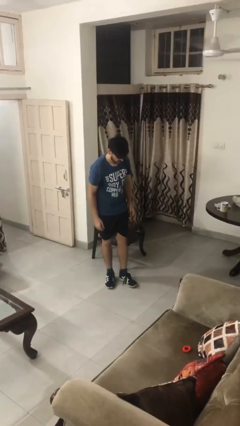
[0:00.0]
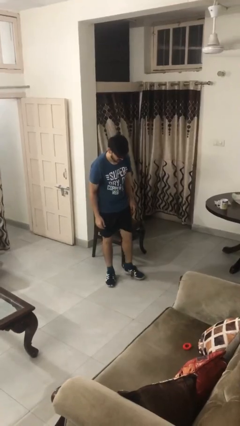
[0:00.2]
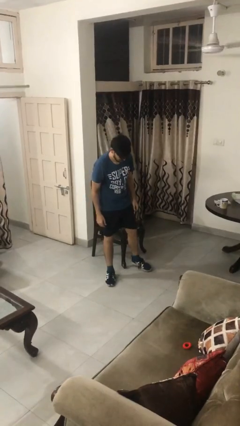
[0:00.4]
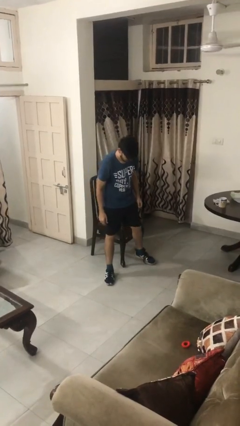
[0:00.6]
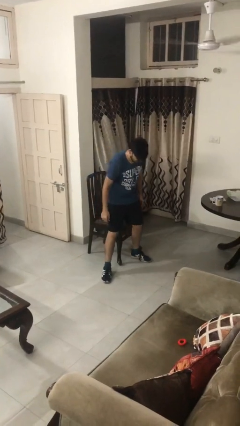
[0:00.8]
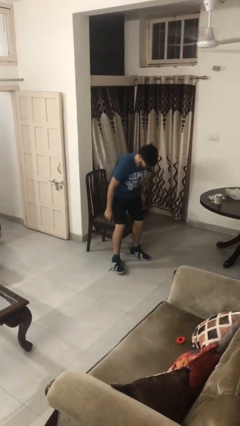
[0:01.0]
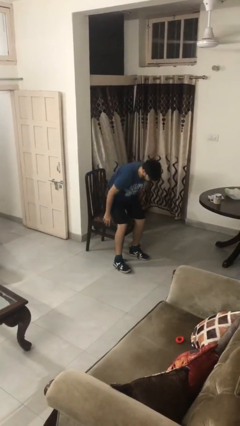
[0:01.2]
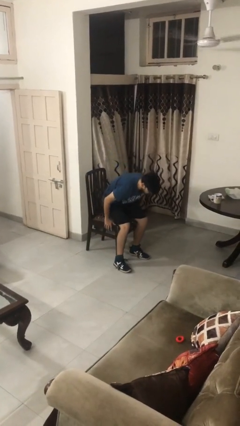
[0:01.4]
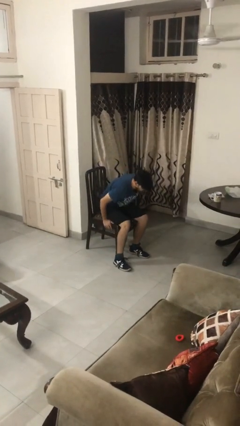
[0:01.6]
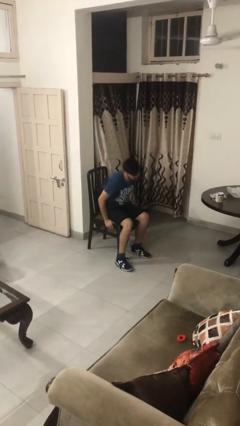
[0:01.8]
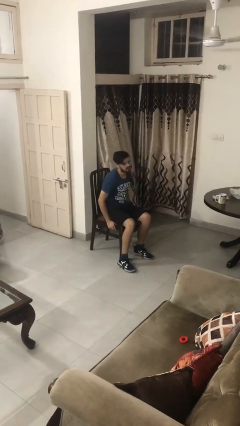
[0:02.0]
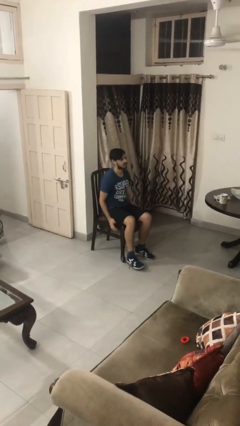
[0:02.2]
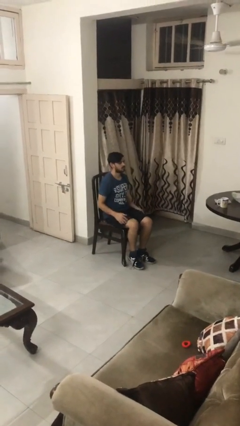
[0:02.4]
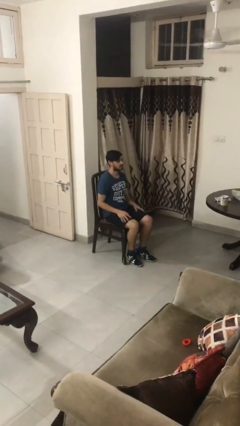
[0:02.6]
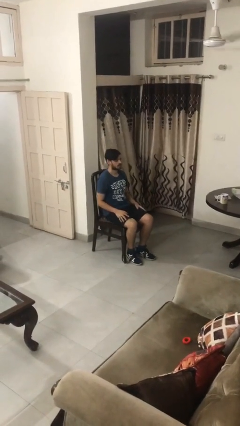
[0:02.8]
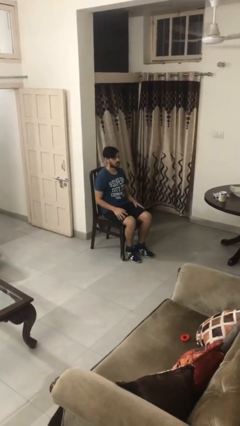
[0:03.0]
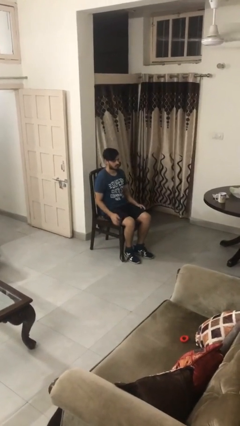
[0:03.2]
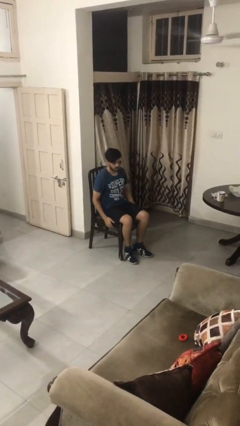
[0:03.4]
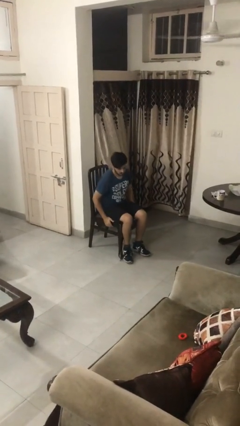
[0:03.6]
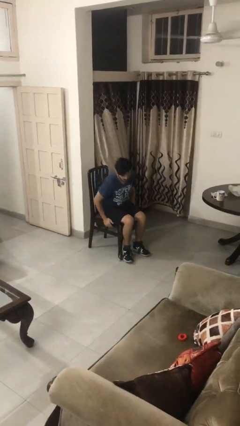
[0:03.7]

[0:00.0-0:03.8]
person sits down

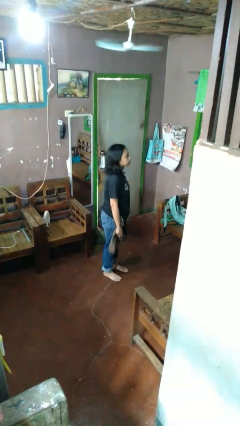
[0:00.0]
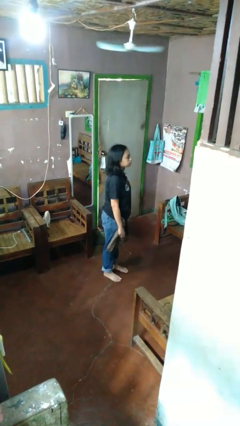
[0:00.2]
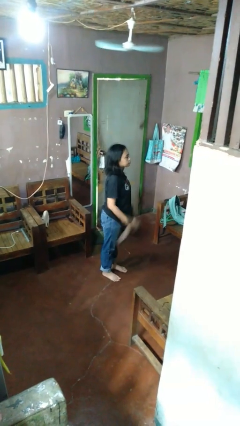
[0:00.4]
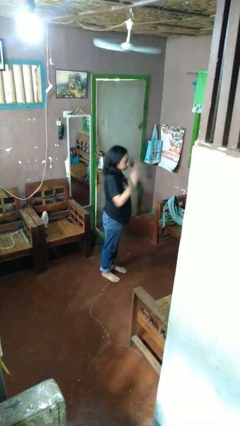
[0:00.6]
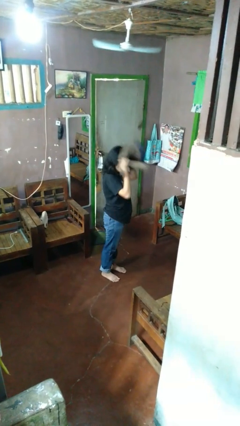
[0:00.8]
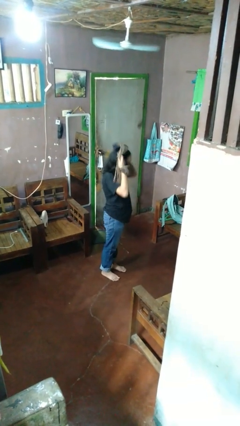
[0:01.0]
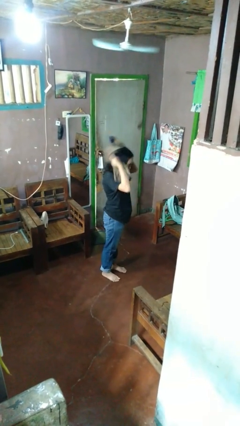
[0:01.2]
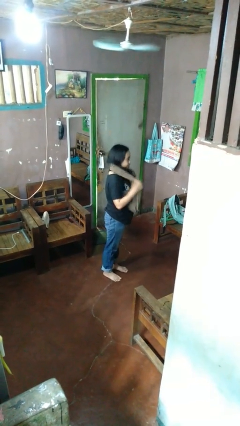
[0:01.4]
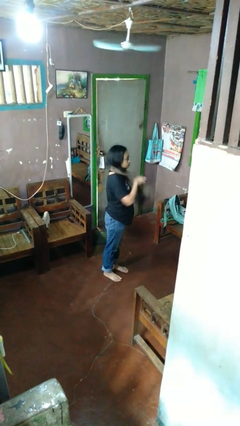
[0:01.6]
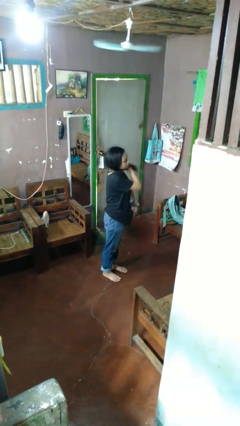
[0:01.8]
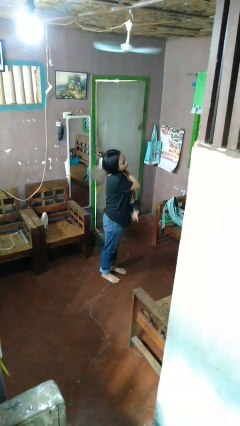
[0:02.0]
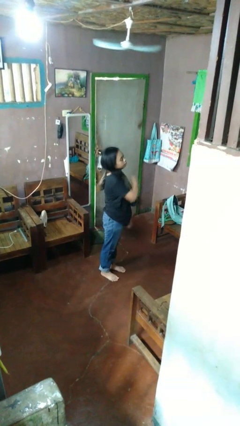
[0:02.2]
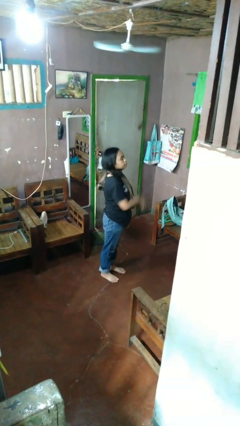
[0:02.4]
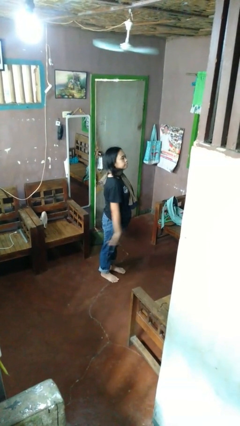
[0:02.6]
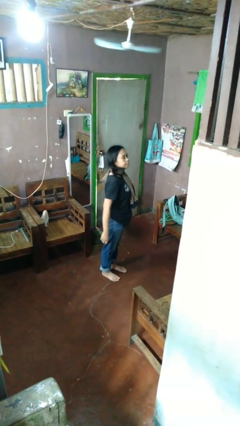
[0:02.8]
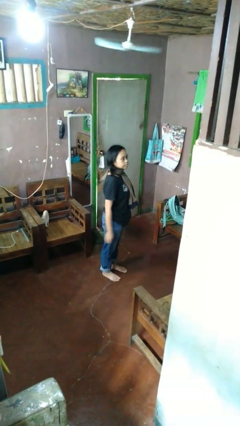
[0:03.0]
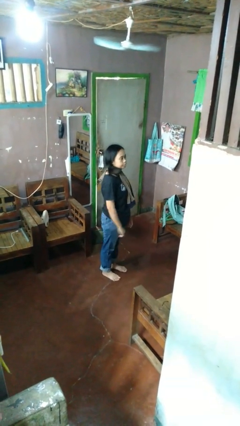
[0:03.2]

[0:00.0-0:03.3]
person puts on scarf

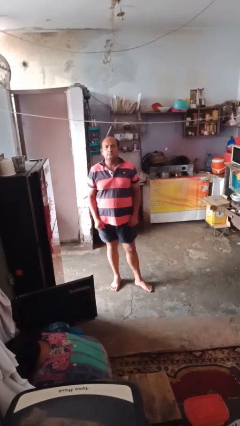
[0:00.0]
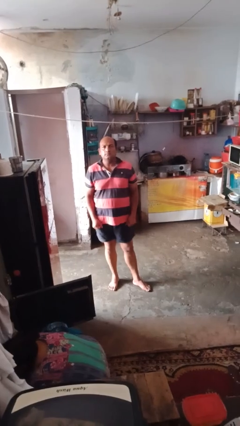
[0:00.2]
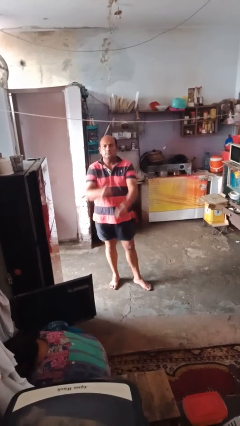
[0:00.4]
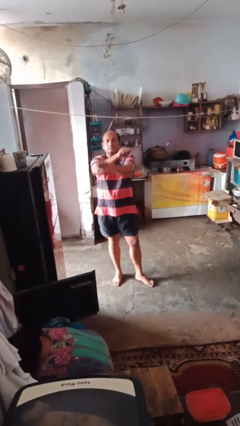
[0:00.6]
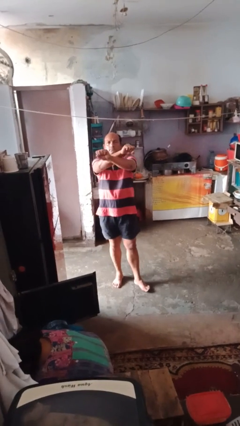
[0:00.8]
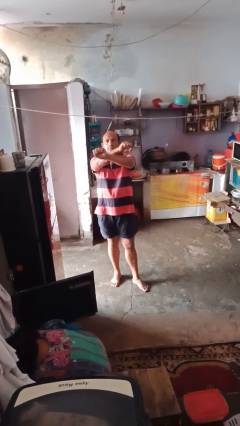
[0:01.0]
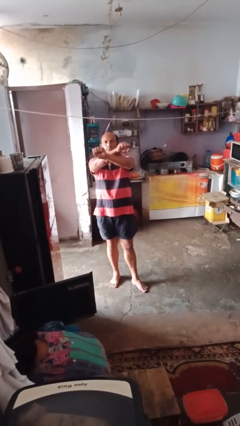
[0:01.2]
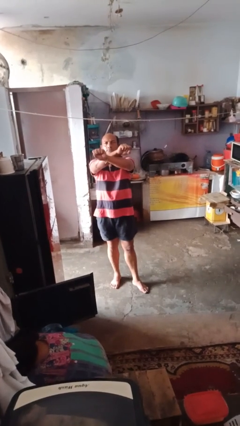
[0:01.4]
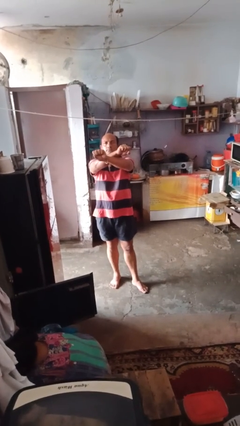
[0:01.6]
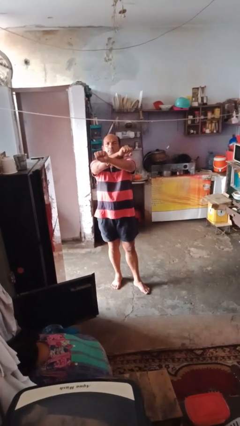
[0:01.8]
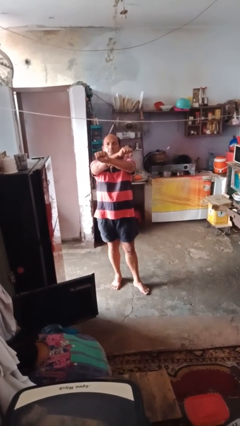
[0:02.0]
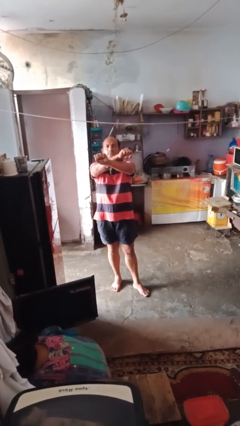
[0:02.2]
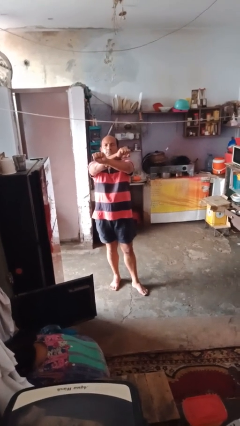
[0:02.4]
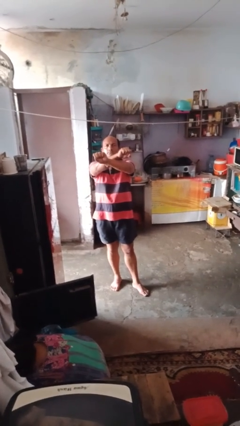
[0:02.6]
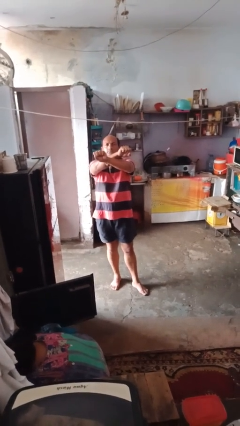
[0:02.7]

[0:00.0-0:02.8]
person gestures arms x

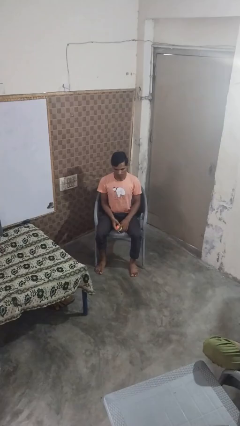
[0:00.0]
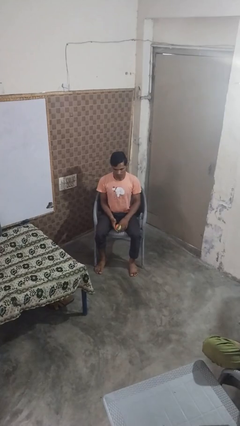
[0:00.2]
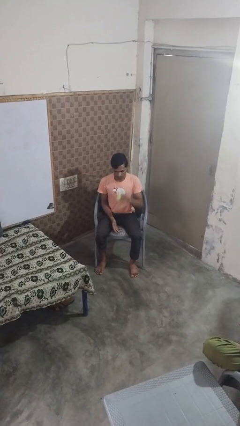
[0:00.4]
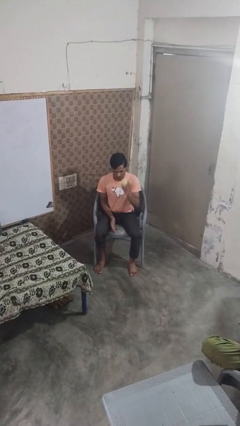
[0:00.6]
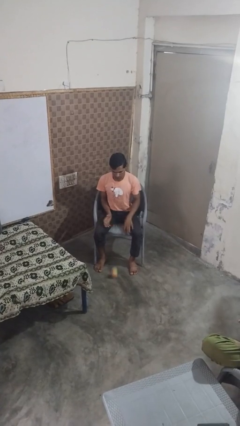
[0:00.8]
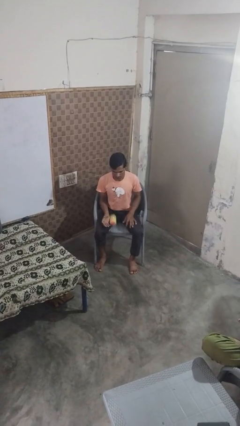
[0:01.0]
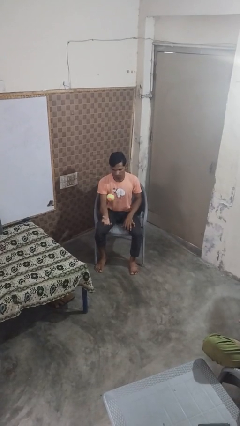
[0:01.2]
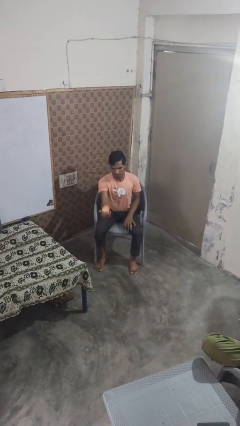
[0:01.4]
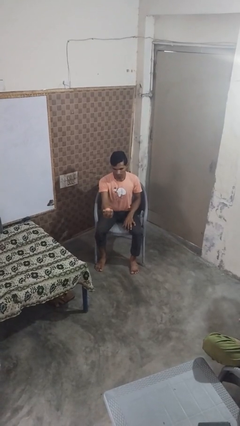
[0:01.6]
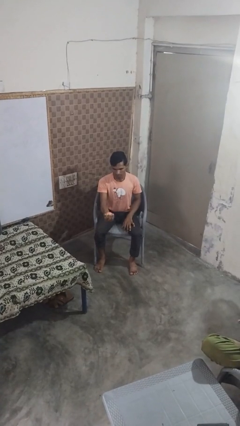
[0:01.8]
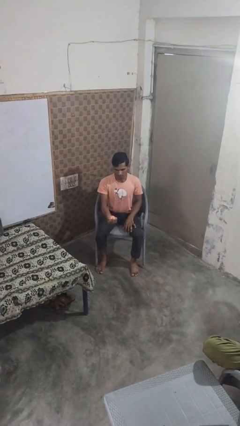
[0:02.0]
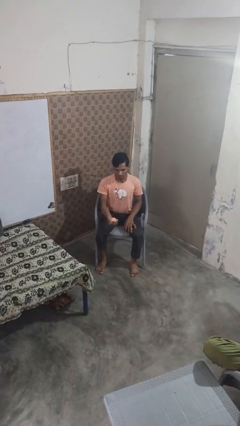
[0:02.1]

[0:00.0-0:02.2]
person bounces ball on floor

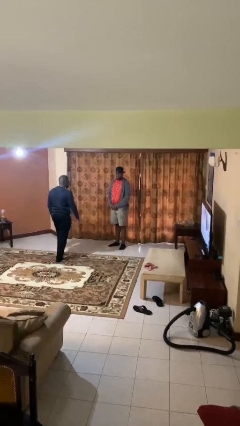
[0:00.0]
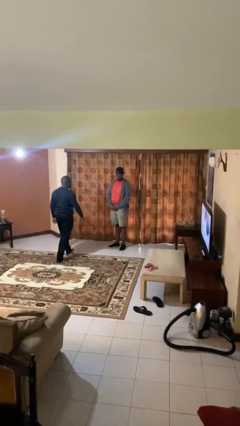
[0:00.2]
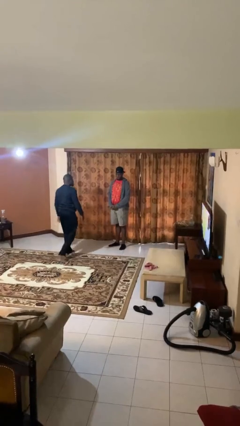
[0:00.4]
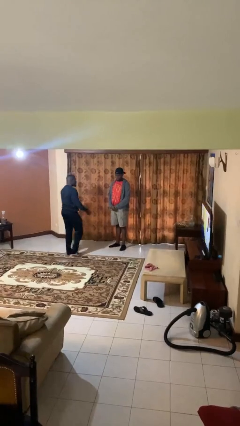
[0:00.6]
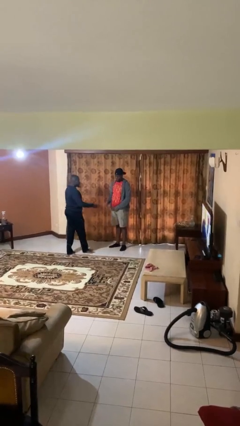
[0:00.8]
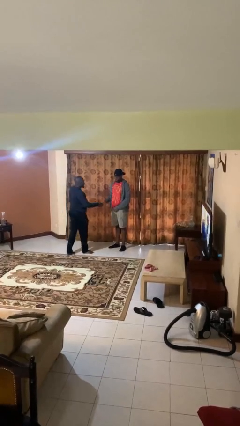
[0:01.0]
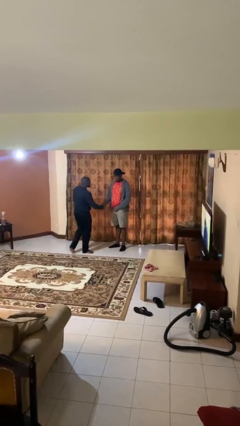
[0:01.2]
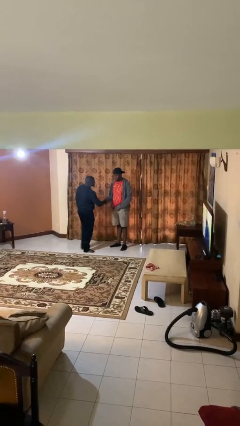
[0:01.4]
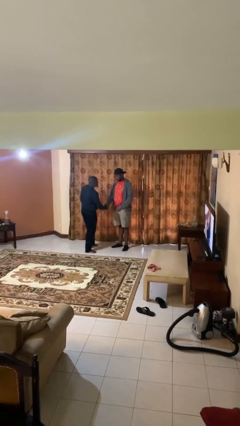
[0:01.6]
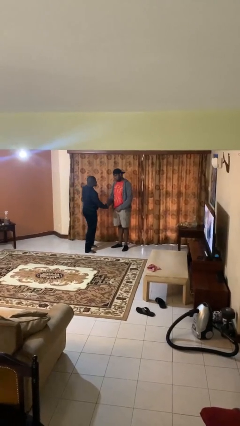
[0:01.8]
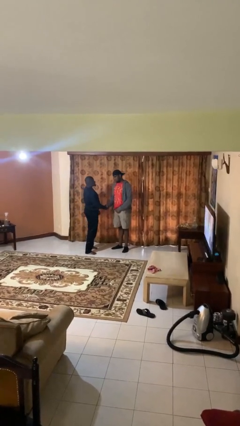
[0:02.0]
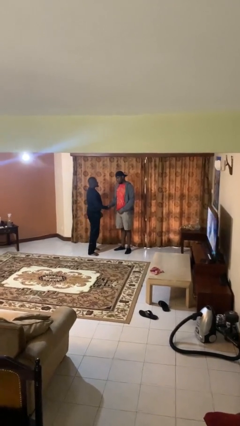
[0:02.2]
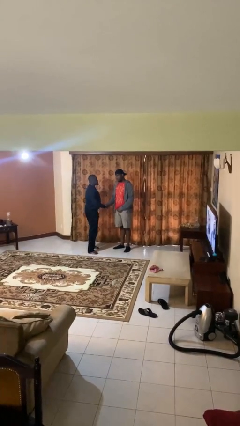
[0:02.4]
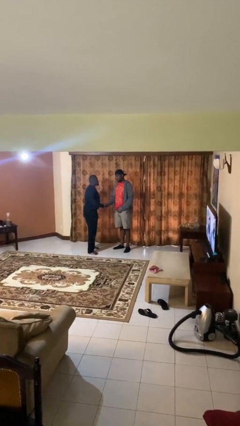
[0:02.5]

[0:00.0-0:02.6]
person shakes hand

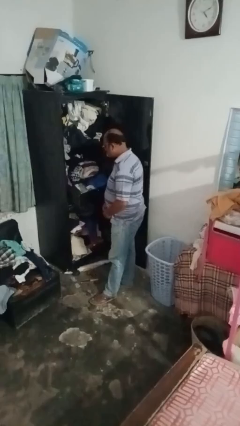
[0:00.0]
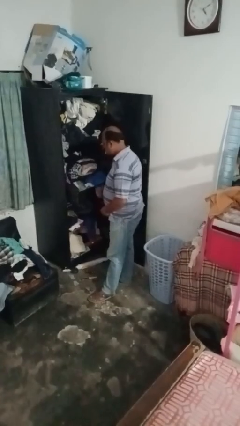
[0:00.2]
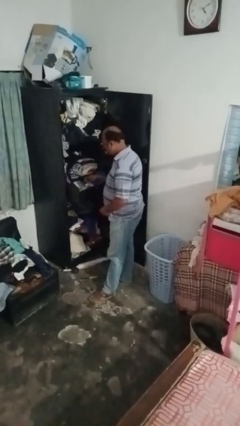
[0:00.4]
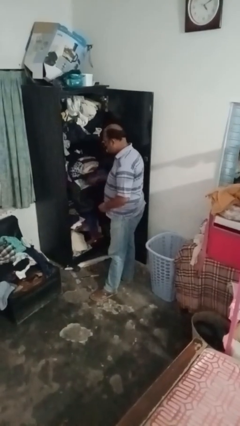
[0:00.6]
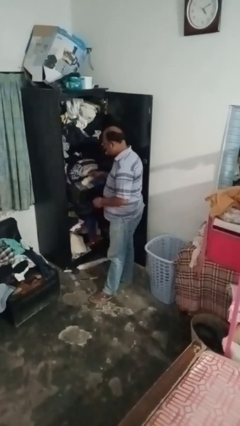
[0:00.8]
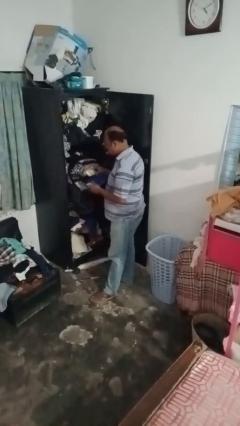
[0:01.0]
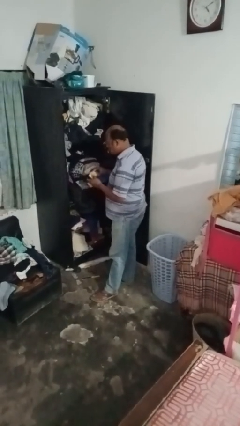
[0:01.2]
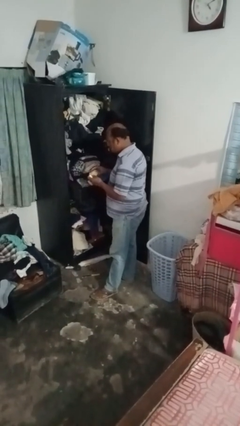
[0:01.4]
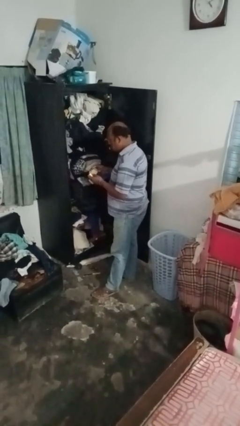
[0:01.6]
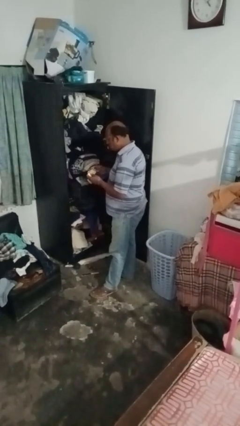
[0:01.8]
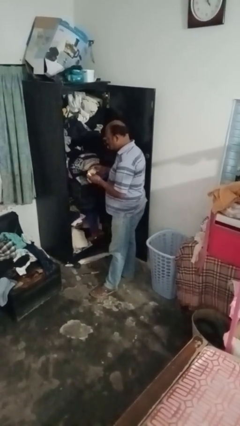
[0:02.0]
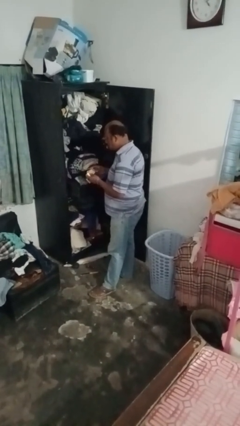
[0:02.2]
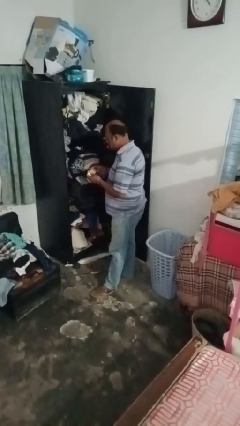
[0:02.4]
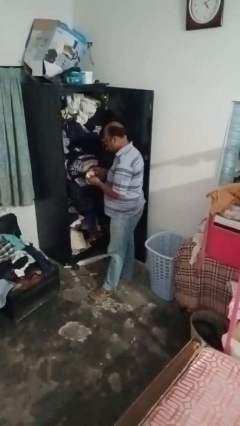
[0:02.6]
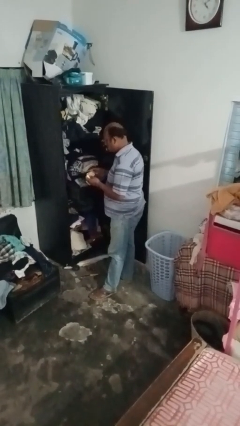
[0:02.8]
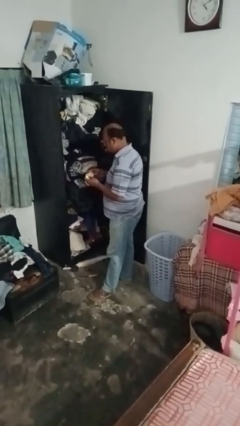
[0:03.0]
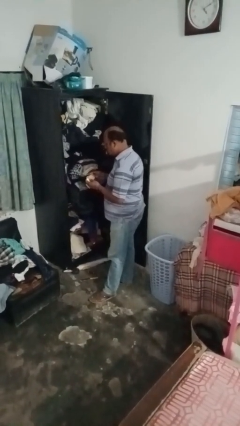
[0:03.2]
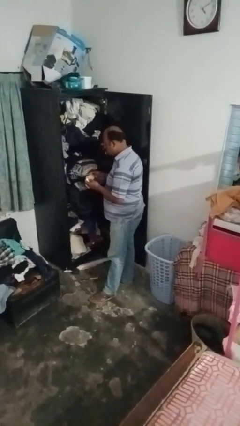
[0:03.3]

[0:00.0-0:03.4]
person puts clothes into dresser
